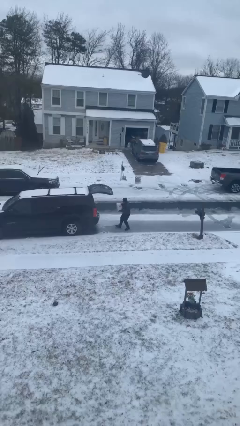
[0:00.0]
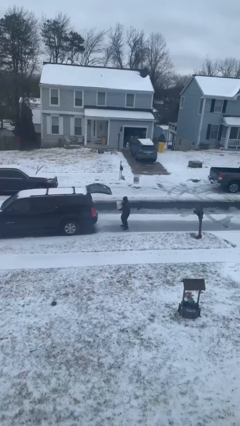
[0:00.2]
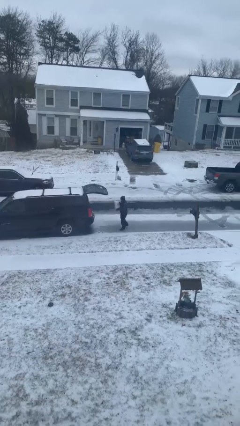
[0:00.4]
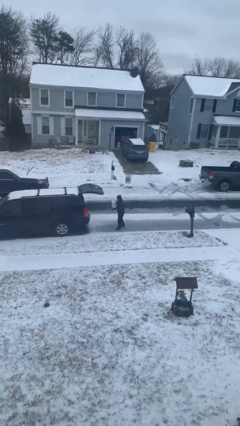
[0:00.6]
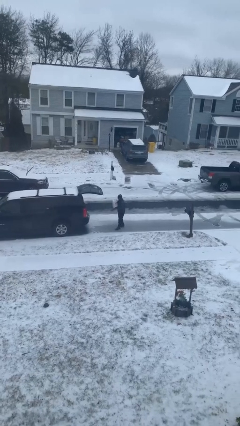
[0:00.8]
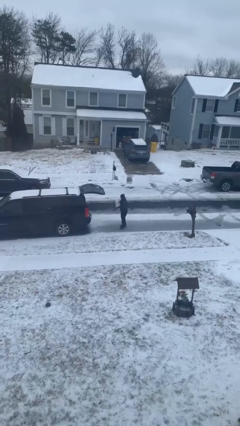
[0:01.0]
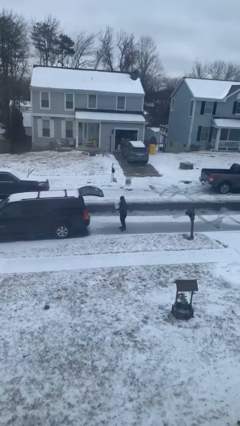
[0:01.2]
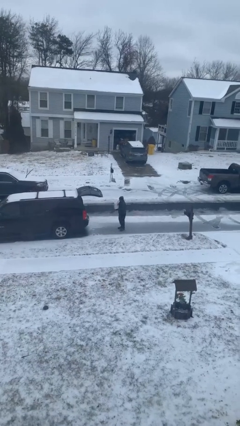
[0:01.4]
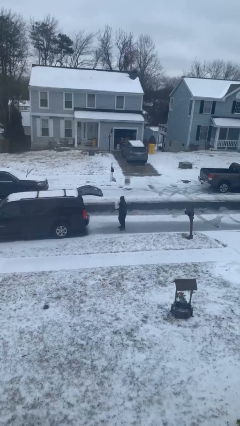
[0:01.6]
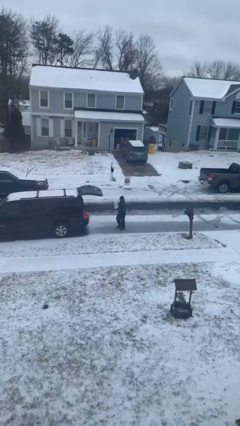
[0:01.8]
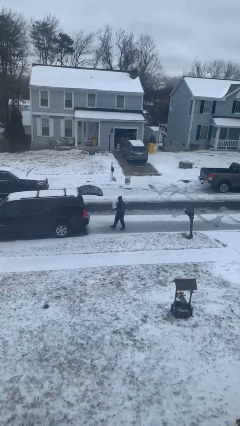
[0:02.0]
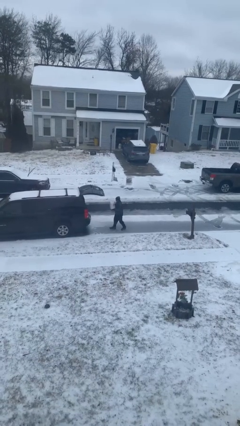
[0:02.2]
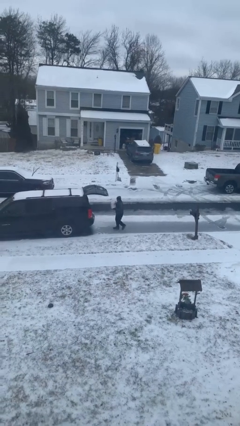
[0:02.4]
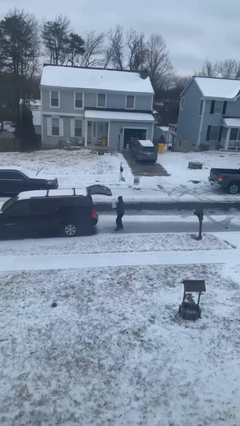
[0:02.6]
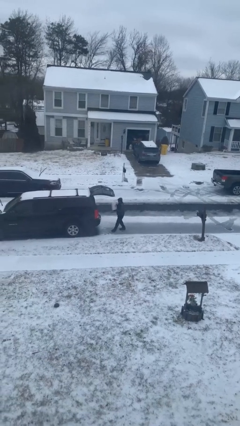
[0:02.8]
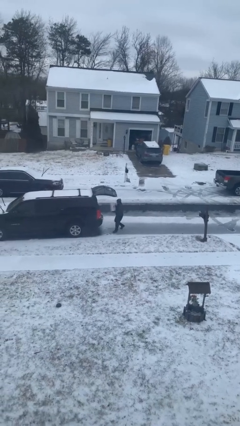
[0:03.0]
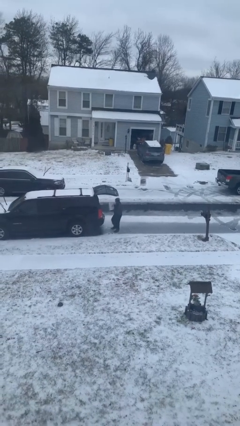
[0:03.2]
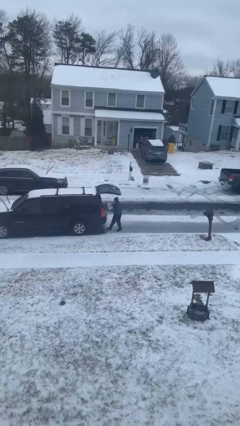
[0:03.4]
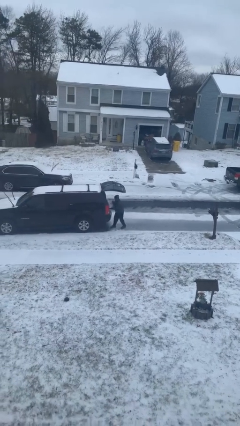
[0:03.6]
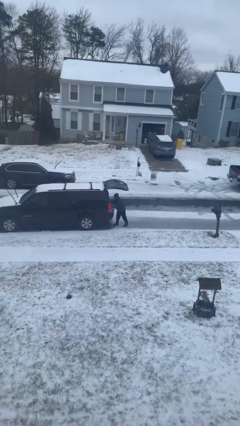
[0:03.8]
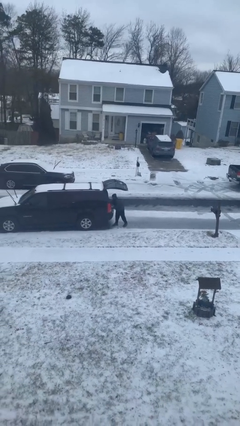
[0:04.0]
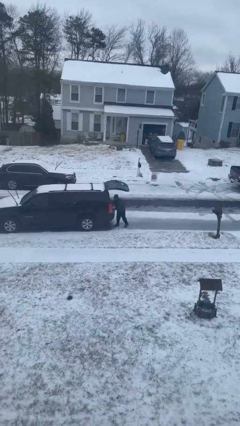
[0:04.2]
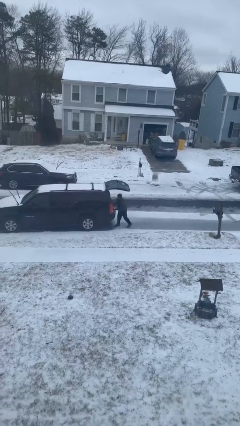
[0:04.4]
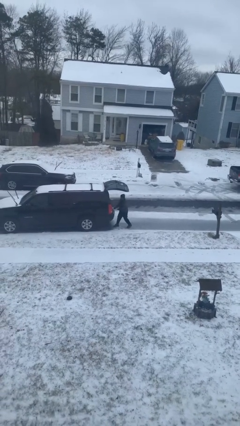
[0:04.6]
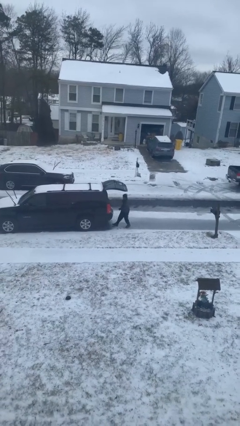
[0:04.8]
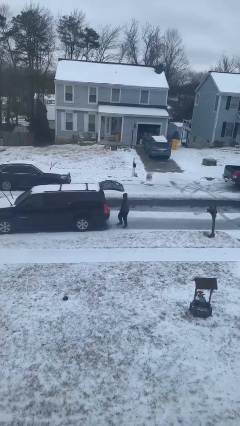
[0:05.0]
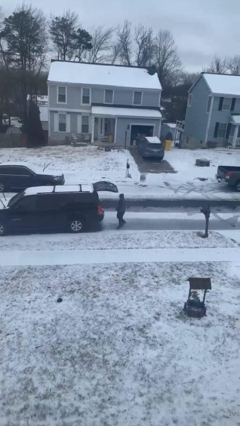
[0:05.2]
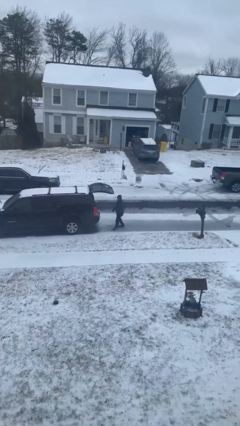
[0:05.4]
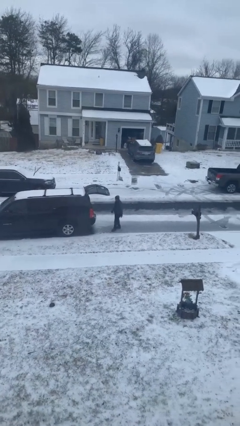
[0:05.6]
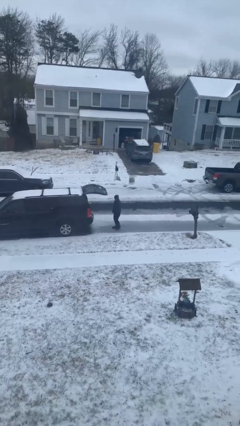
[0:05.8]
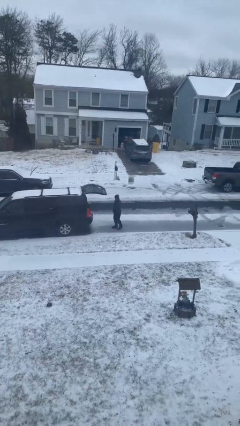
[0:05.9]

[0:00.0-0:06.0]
person loads car

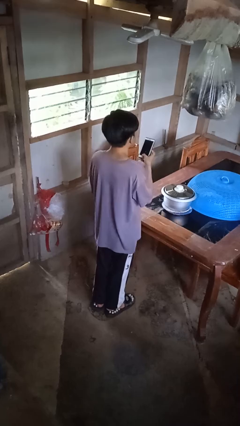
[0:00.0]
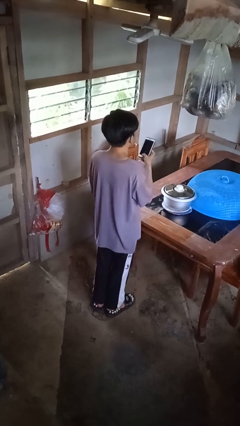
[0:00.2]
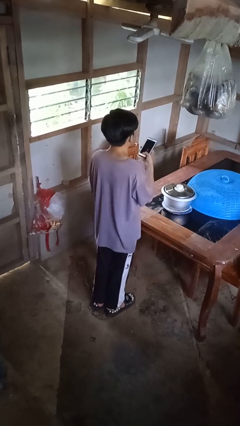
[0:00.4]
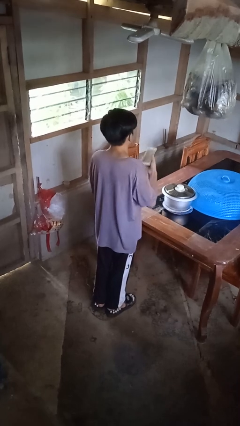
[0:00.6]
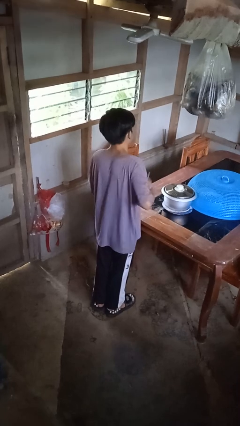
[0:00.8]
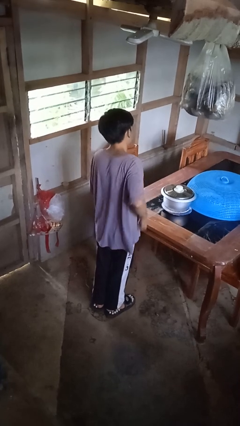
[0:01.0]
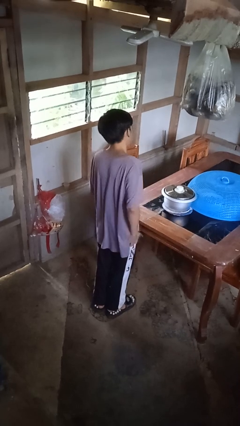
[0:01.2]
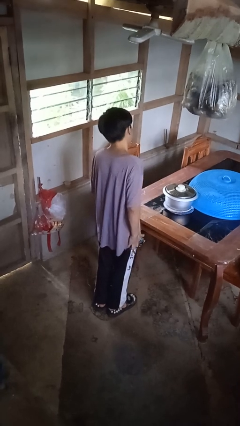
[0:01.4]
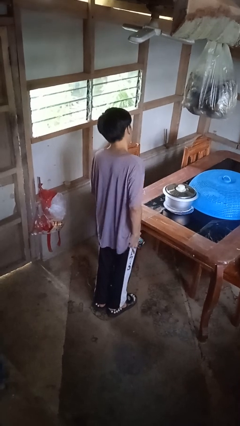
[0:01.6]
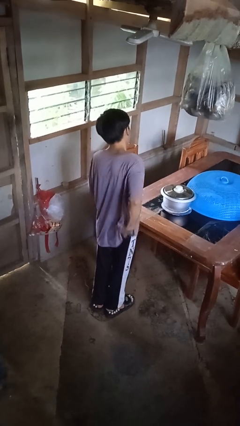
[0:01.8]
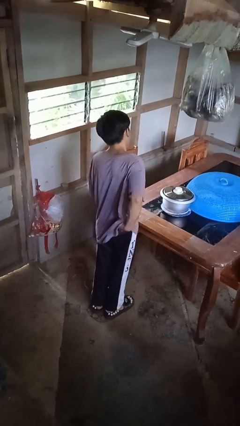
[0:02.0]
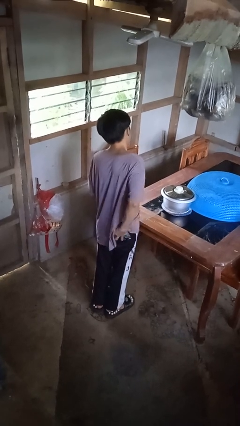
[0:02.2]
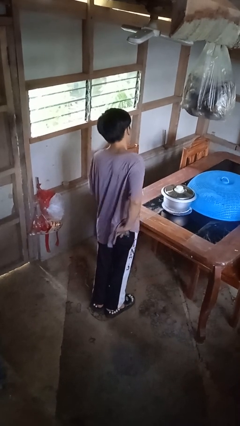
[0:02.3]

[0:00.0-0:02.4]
person puts phone into pocket

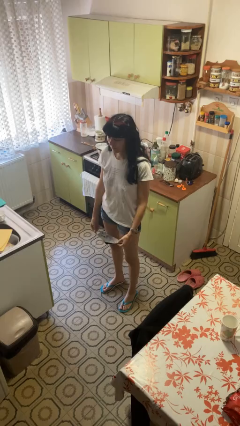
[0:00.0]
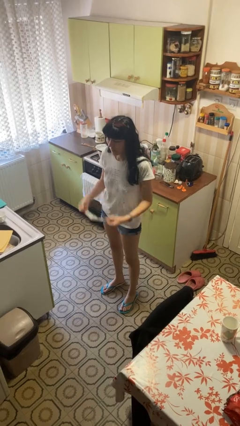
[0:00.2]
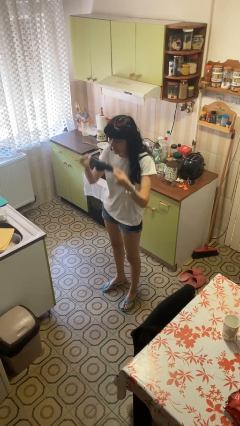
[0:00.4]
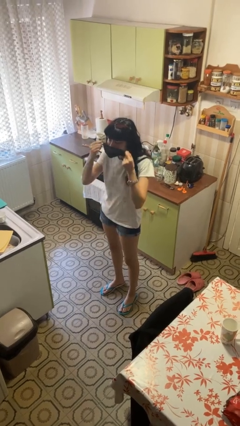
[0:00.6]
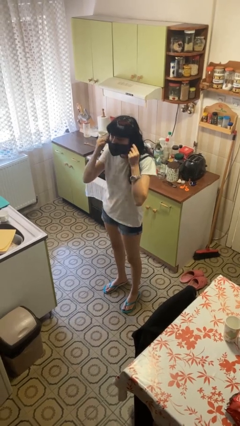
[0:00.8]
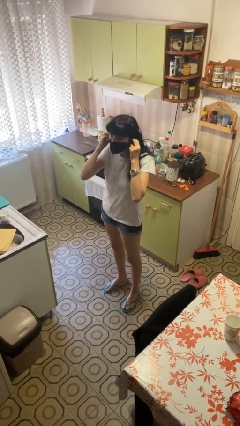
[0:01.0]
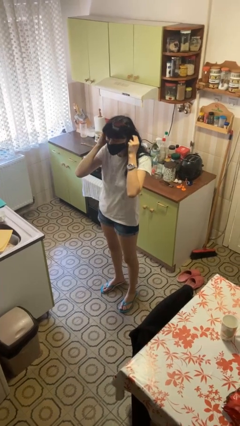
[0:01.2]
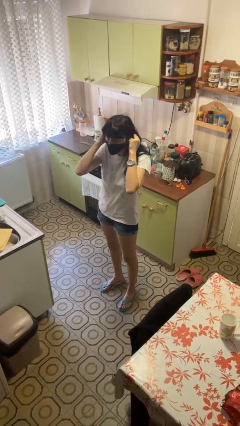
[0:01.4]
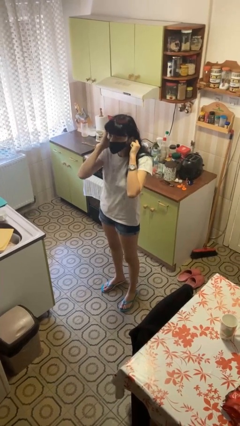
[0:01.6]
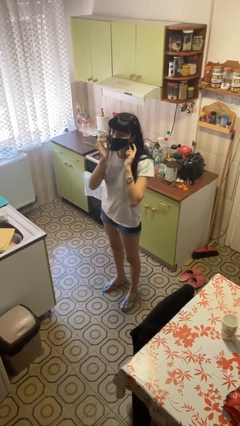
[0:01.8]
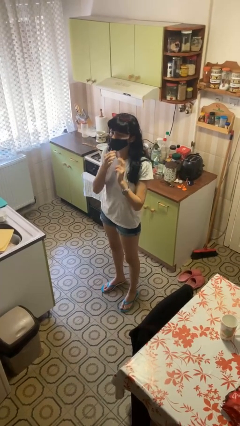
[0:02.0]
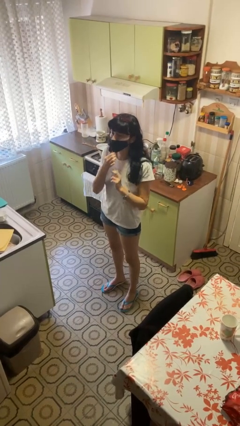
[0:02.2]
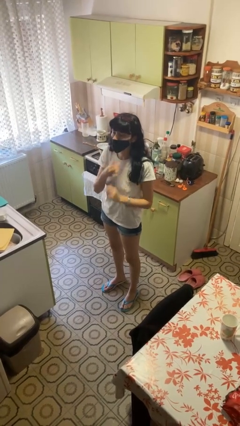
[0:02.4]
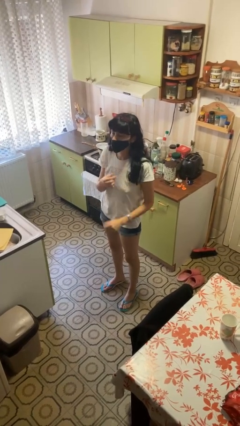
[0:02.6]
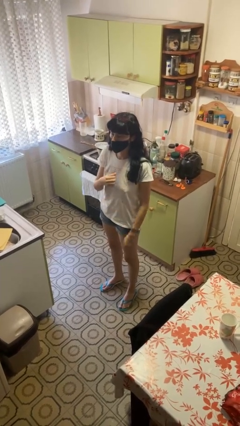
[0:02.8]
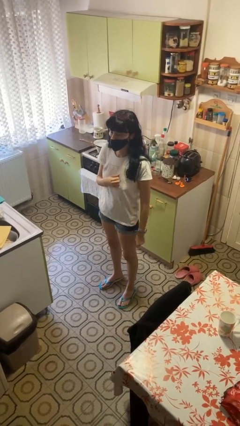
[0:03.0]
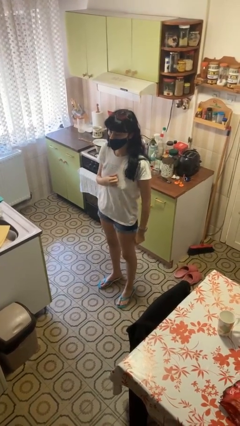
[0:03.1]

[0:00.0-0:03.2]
person puts on facemask

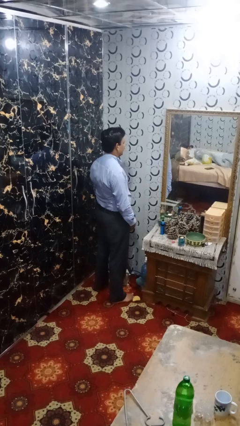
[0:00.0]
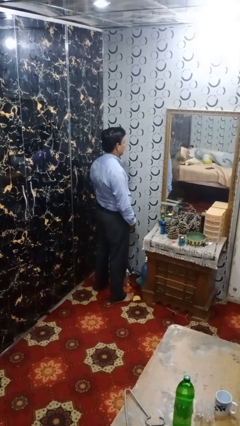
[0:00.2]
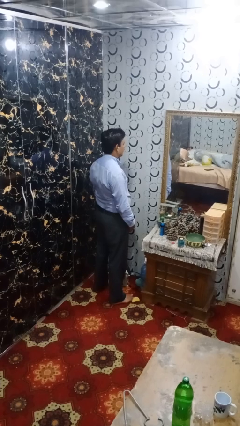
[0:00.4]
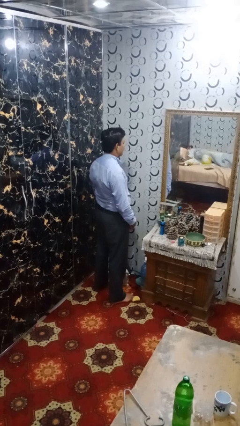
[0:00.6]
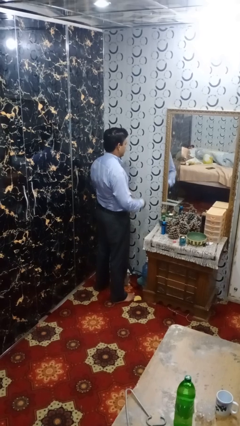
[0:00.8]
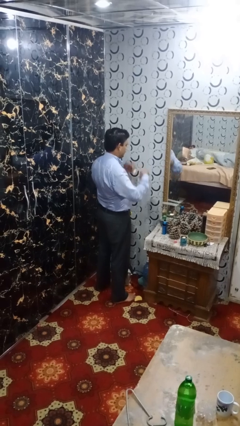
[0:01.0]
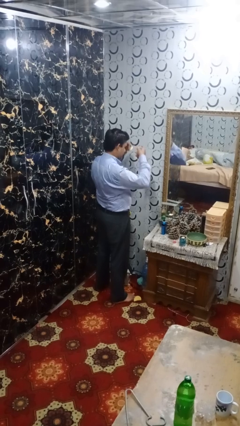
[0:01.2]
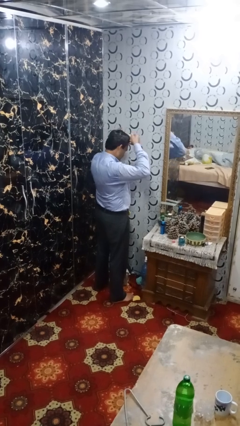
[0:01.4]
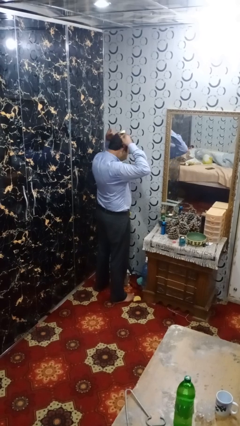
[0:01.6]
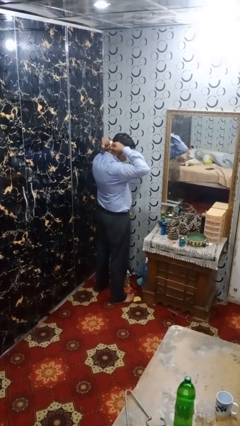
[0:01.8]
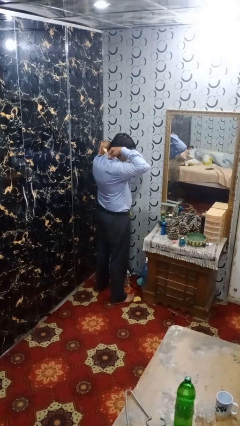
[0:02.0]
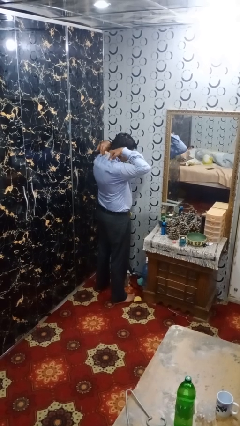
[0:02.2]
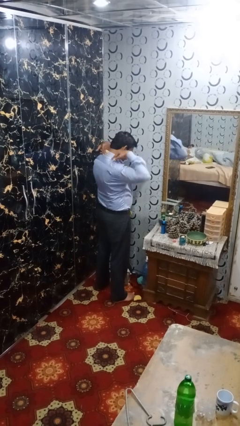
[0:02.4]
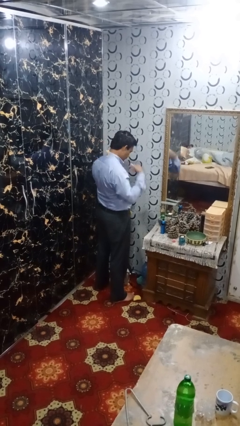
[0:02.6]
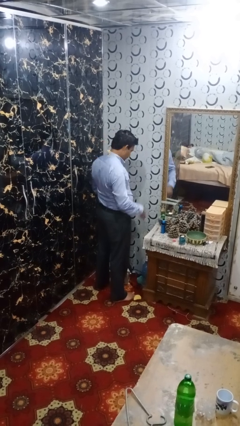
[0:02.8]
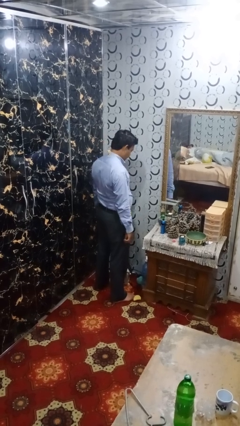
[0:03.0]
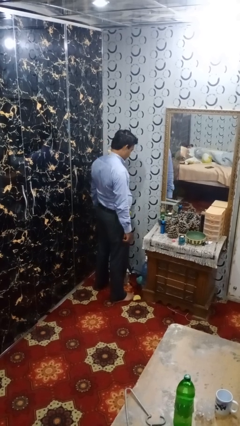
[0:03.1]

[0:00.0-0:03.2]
person puts on necklace

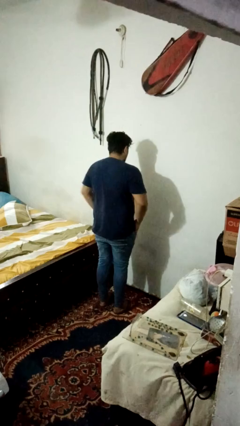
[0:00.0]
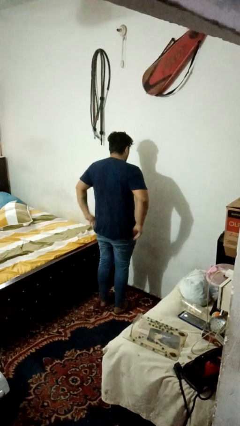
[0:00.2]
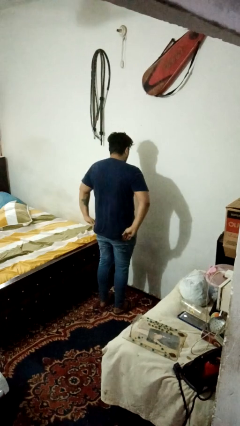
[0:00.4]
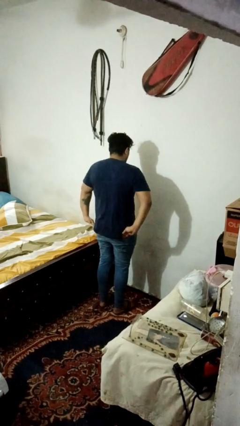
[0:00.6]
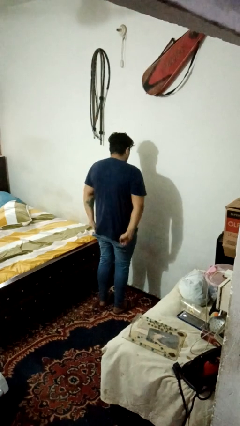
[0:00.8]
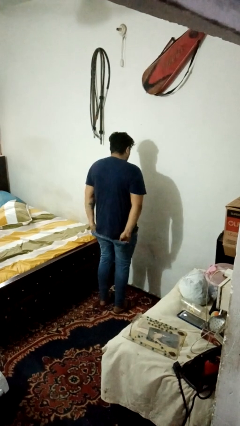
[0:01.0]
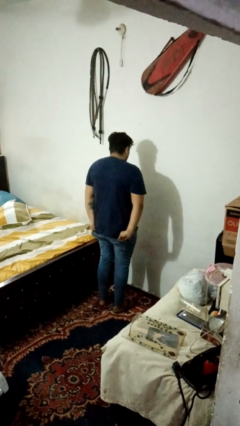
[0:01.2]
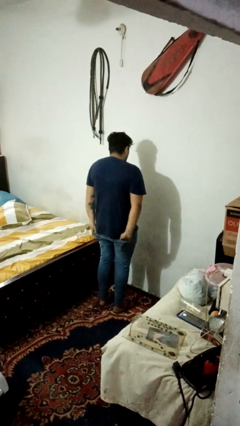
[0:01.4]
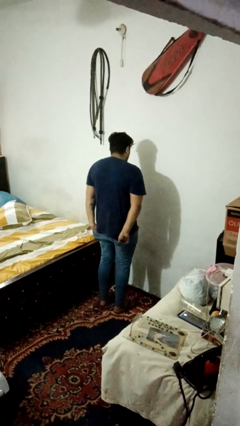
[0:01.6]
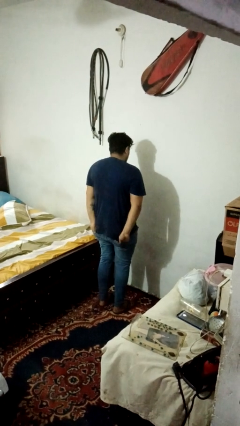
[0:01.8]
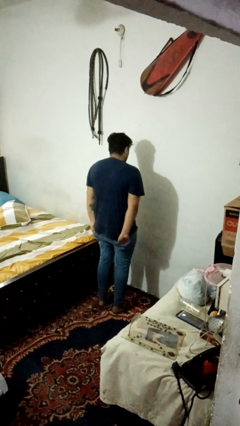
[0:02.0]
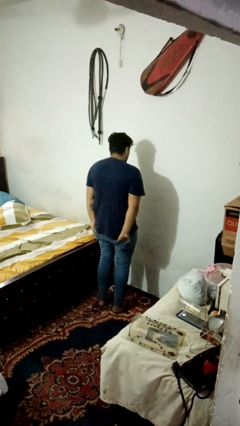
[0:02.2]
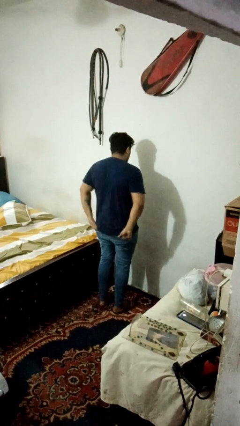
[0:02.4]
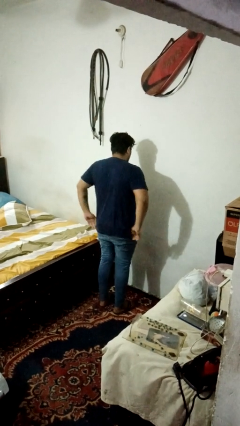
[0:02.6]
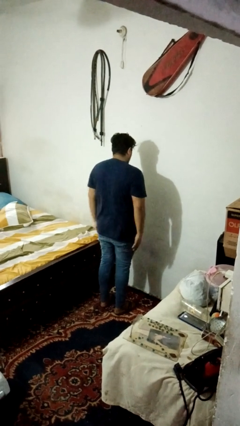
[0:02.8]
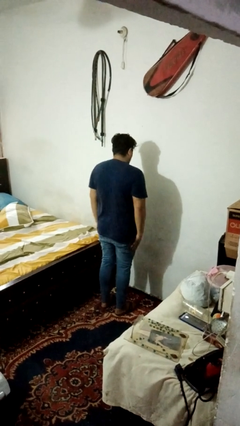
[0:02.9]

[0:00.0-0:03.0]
person puts hands in back pockets
